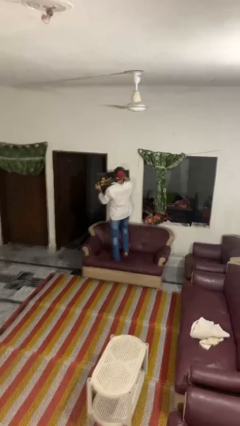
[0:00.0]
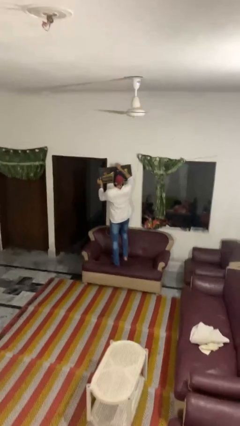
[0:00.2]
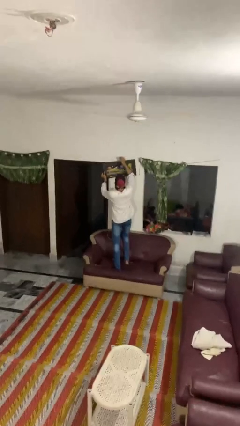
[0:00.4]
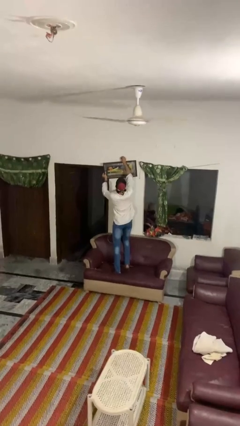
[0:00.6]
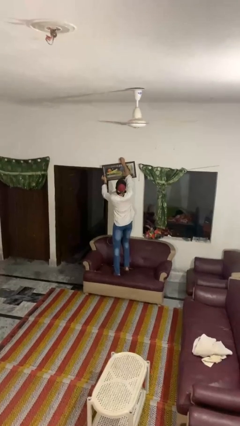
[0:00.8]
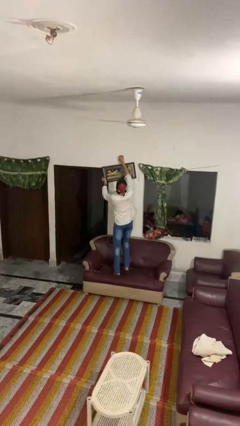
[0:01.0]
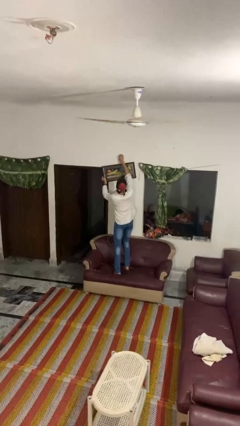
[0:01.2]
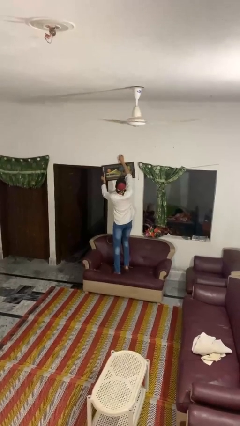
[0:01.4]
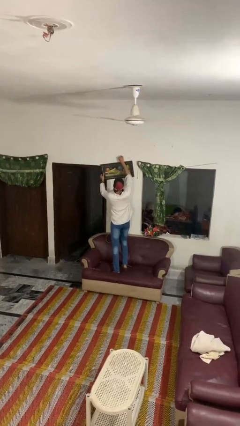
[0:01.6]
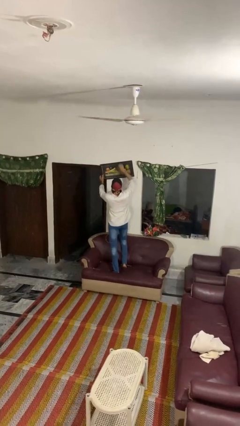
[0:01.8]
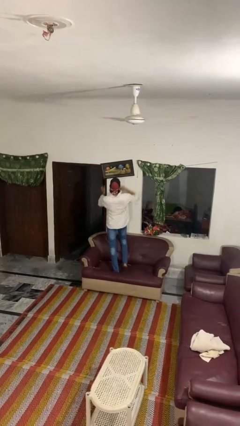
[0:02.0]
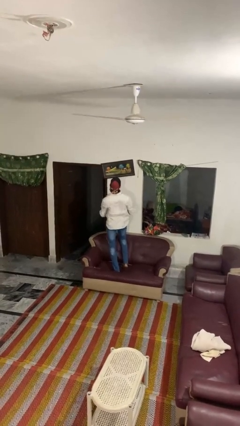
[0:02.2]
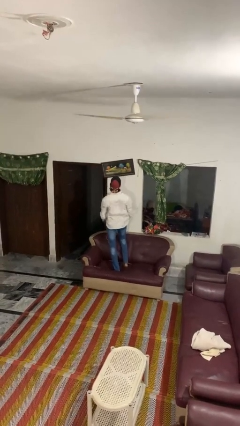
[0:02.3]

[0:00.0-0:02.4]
person puts up picture frame

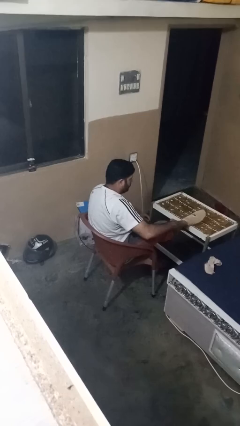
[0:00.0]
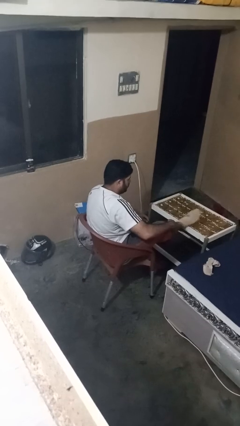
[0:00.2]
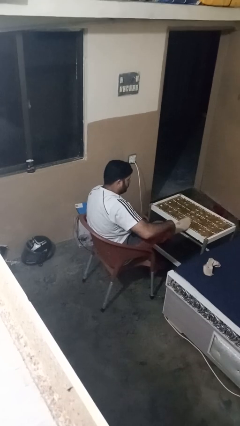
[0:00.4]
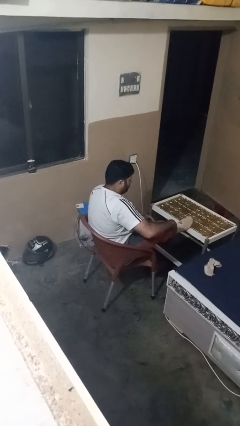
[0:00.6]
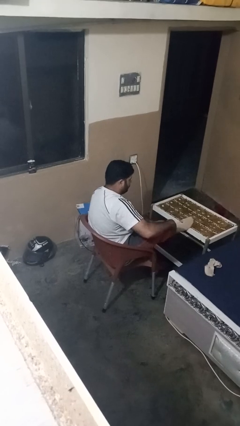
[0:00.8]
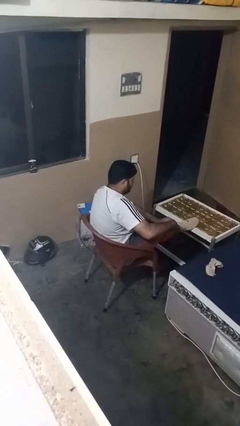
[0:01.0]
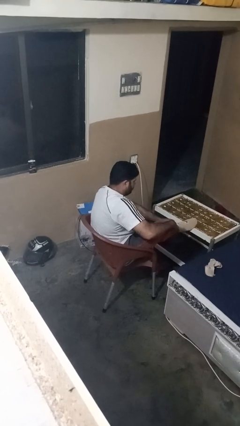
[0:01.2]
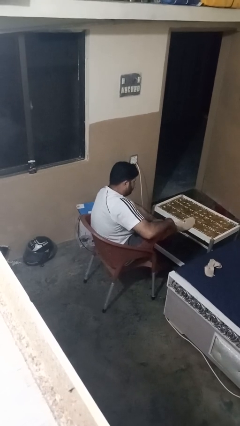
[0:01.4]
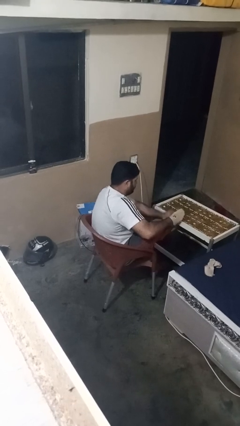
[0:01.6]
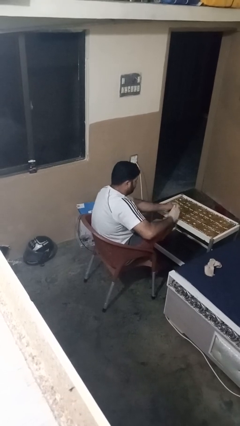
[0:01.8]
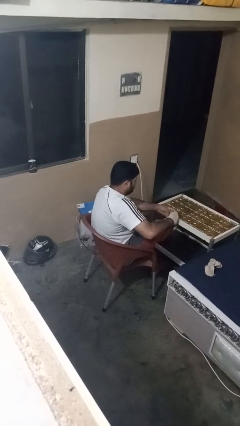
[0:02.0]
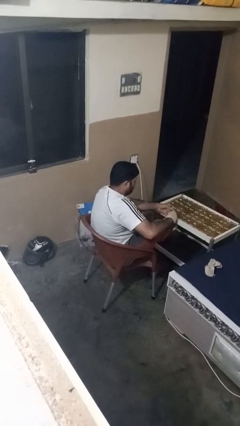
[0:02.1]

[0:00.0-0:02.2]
person takes off socks

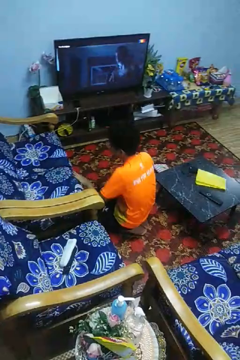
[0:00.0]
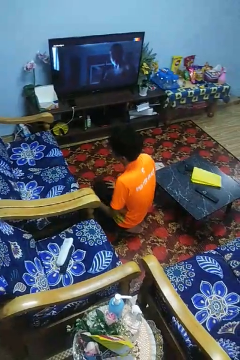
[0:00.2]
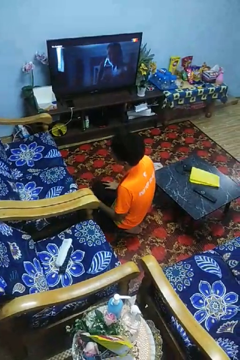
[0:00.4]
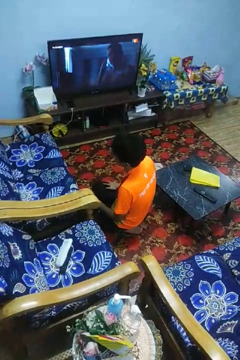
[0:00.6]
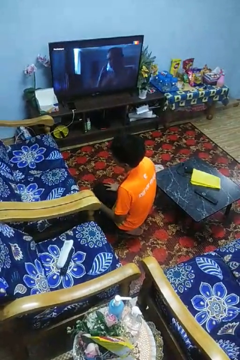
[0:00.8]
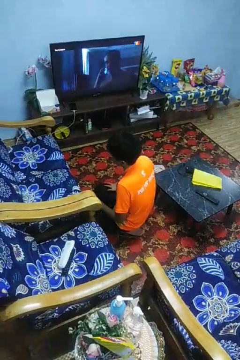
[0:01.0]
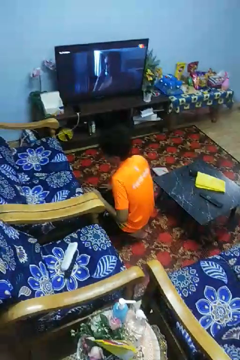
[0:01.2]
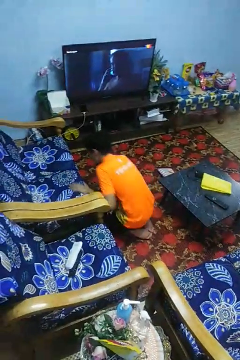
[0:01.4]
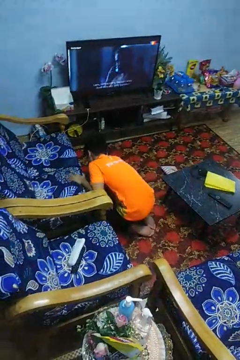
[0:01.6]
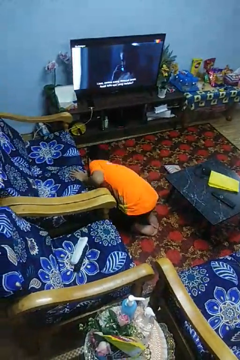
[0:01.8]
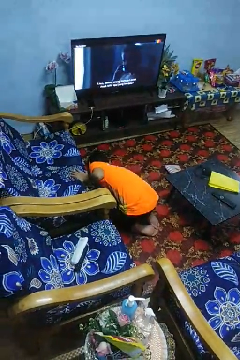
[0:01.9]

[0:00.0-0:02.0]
person searches under couch

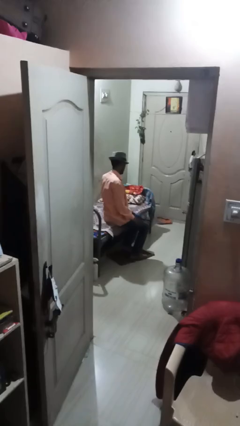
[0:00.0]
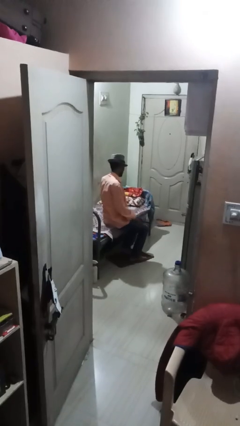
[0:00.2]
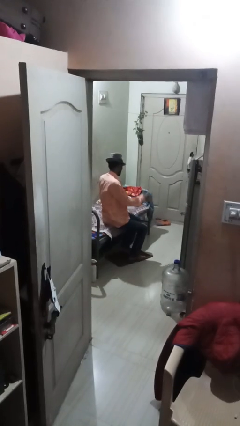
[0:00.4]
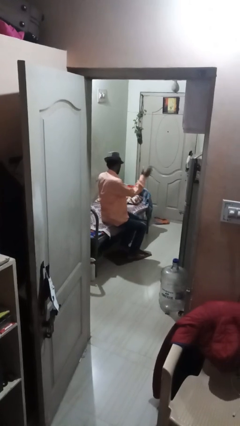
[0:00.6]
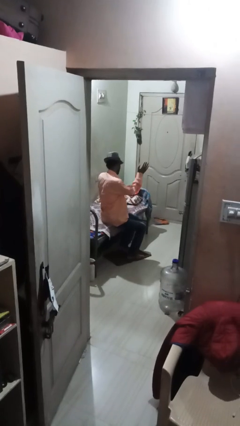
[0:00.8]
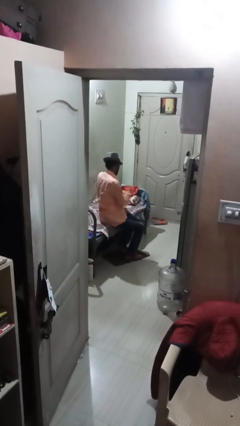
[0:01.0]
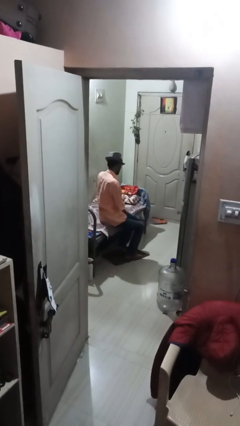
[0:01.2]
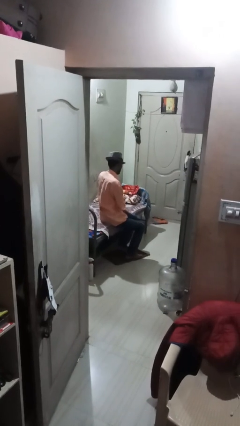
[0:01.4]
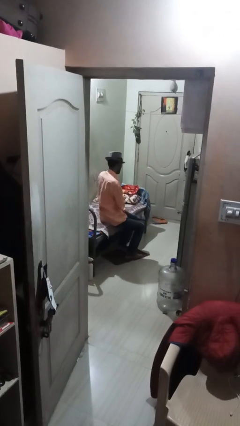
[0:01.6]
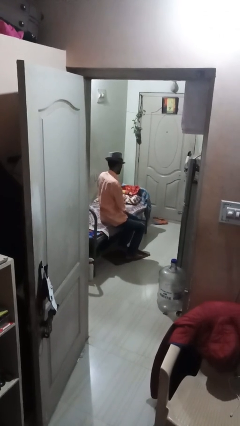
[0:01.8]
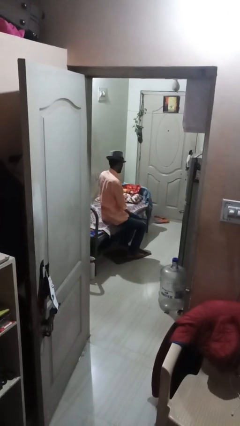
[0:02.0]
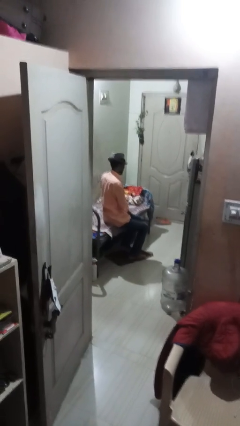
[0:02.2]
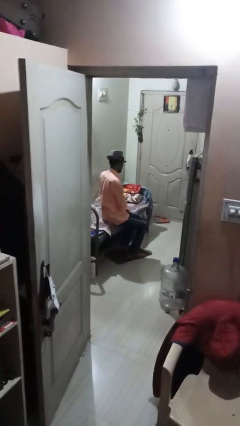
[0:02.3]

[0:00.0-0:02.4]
person swats bug

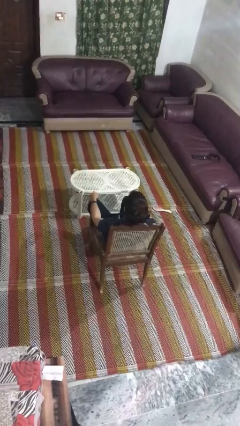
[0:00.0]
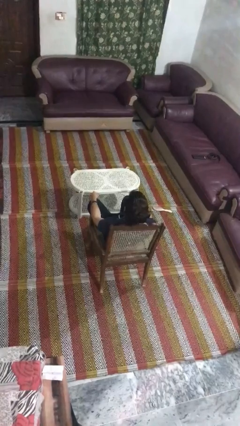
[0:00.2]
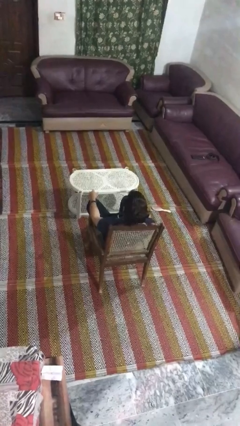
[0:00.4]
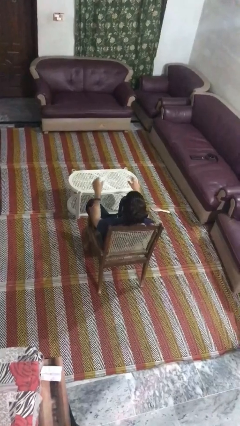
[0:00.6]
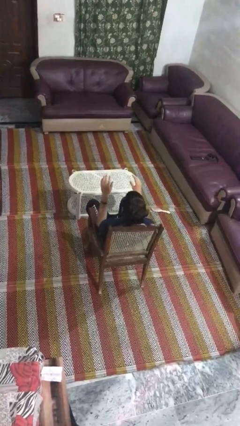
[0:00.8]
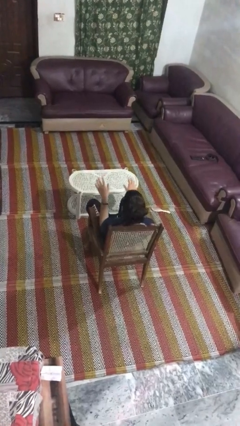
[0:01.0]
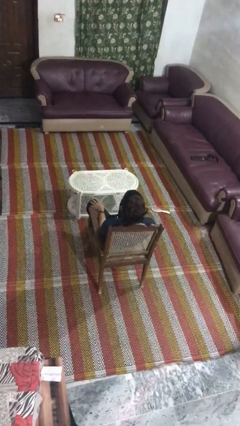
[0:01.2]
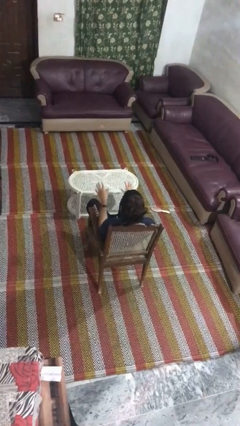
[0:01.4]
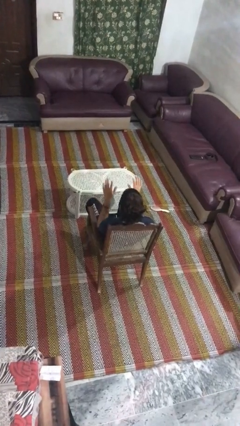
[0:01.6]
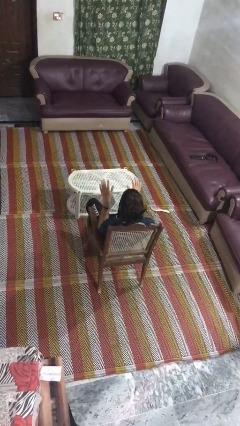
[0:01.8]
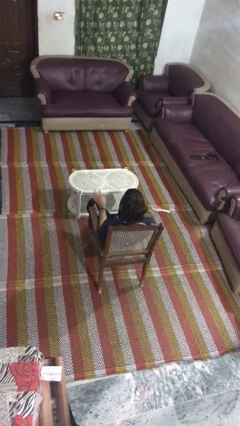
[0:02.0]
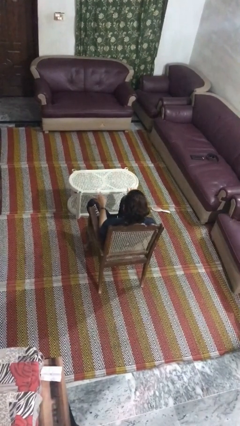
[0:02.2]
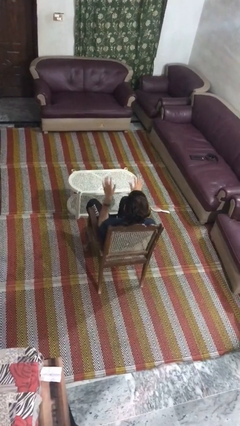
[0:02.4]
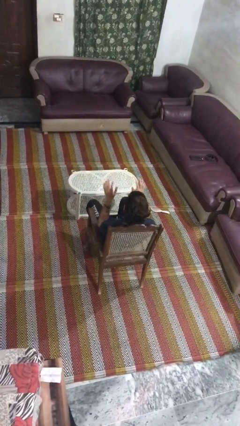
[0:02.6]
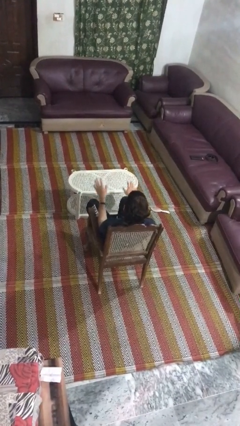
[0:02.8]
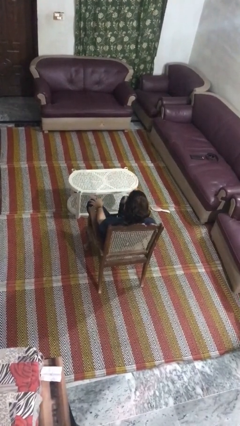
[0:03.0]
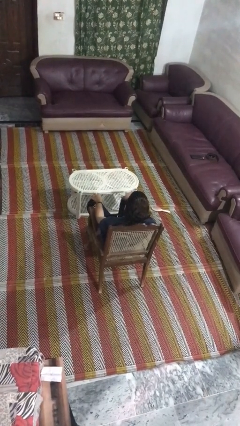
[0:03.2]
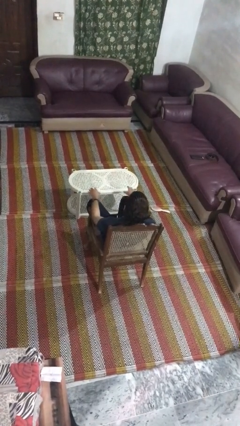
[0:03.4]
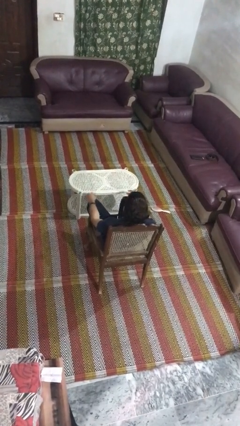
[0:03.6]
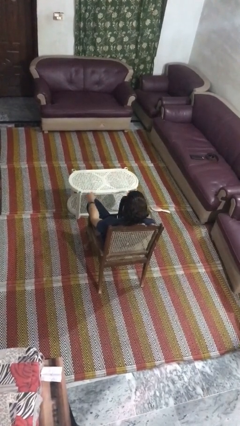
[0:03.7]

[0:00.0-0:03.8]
person slaps hands on thighs

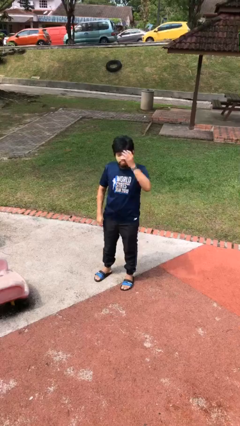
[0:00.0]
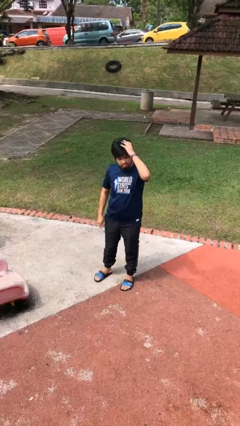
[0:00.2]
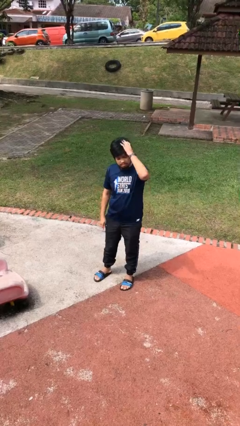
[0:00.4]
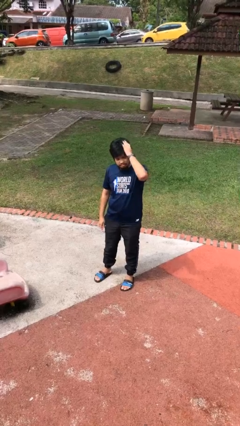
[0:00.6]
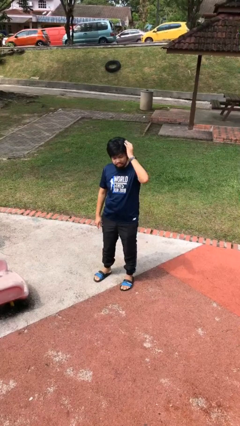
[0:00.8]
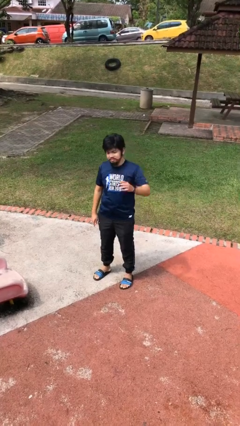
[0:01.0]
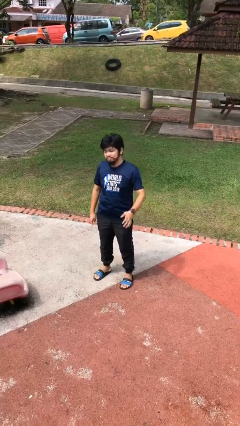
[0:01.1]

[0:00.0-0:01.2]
person pats head

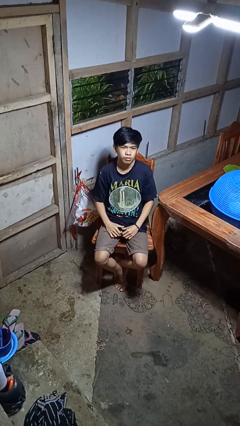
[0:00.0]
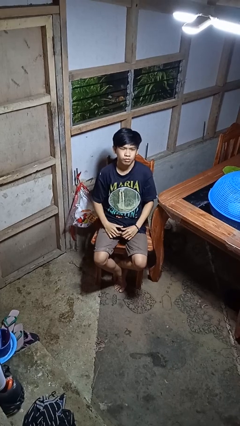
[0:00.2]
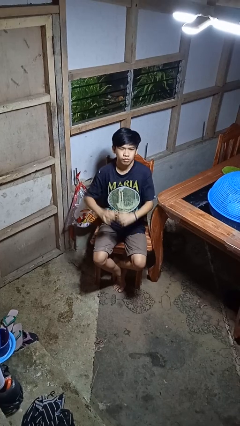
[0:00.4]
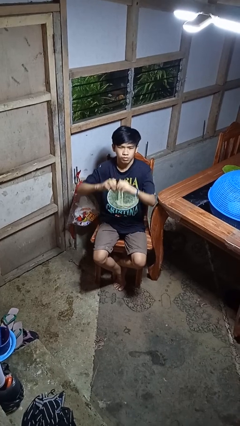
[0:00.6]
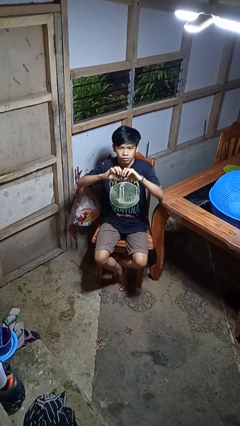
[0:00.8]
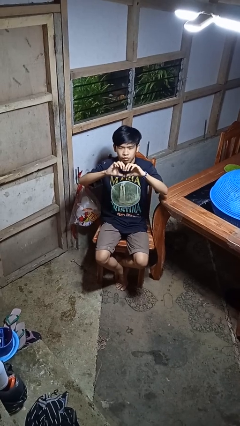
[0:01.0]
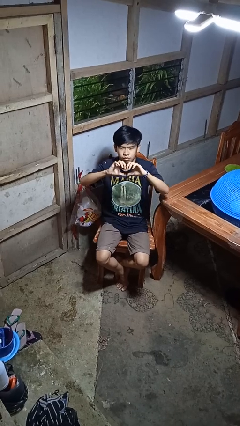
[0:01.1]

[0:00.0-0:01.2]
person gestures heart

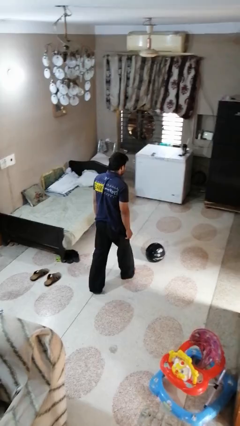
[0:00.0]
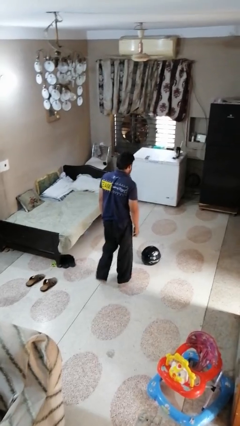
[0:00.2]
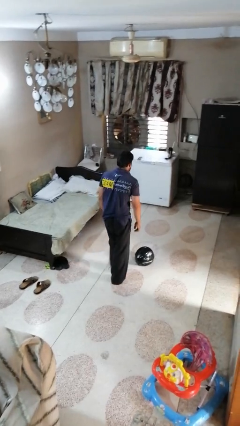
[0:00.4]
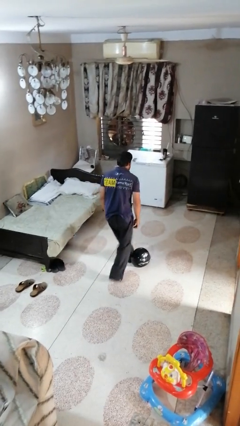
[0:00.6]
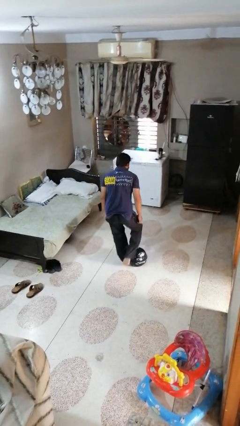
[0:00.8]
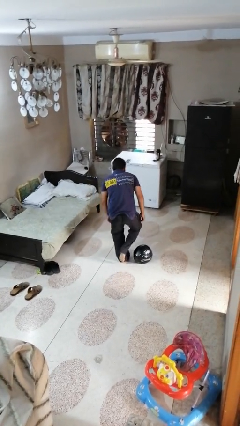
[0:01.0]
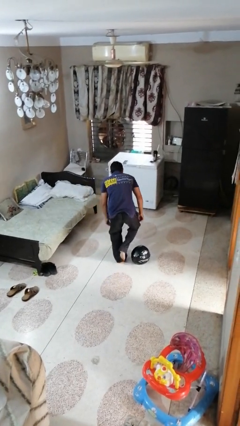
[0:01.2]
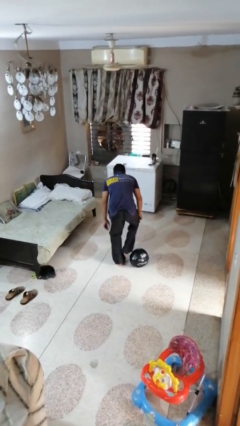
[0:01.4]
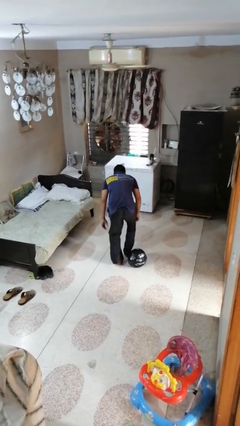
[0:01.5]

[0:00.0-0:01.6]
person trips on object on floor

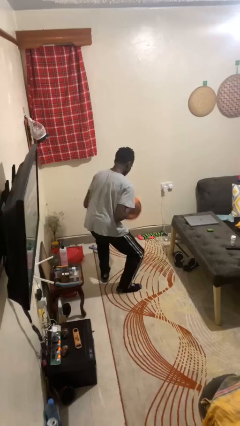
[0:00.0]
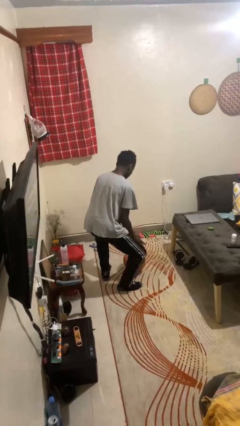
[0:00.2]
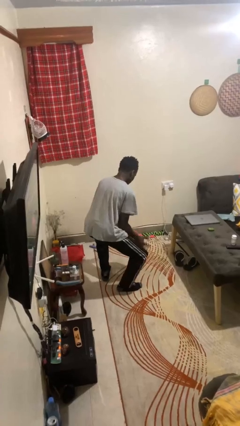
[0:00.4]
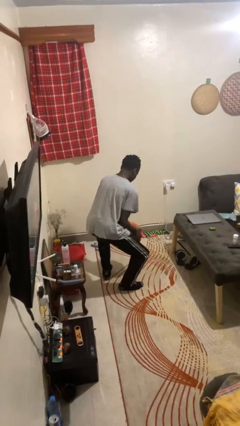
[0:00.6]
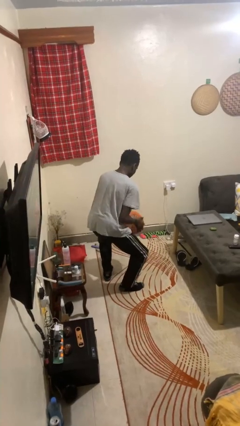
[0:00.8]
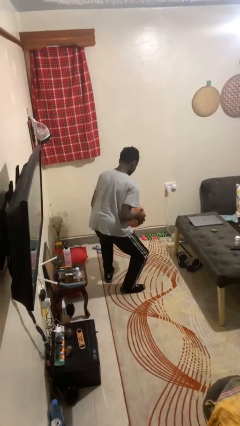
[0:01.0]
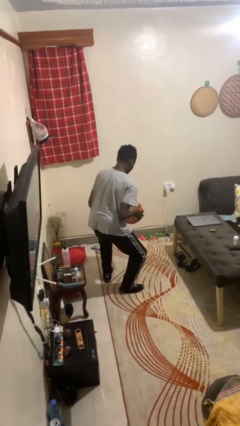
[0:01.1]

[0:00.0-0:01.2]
person bounces ball on floor
